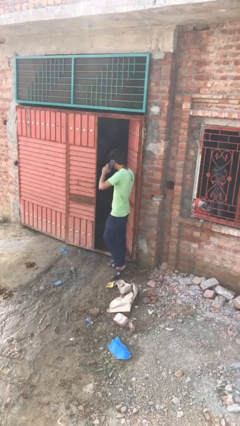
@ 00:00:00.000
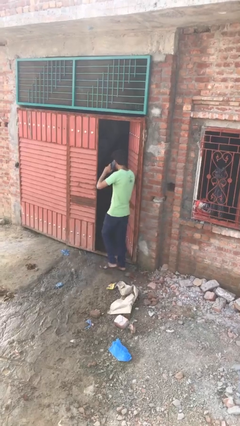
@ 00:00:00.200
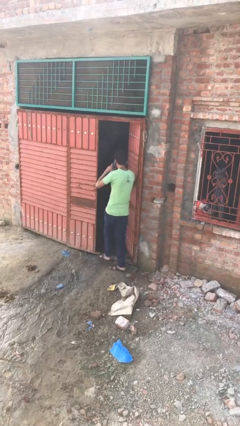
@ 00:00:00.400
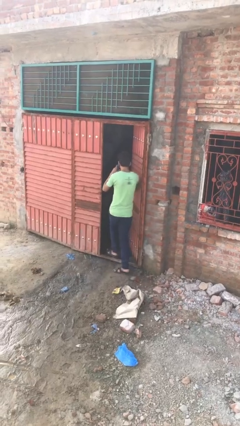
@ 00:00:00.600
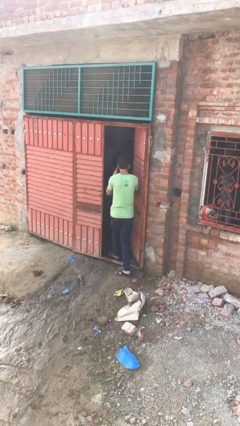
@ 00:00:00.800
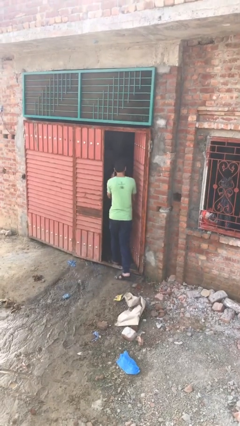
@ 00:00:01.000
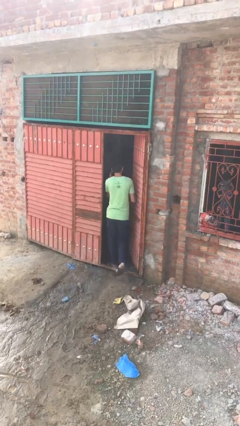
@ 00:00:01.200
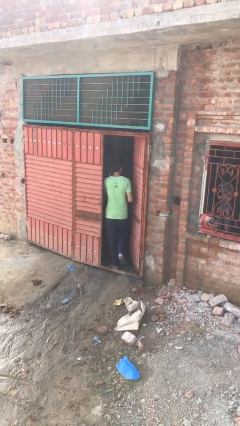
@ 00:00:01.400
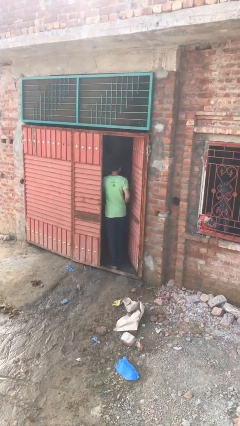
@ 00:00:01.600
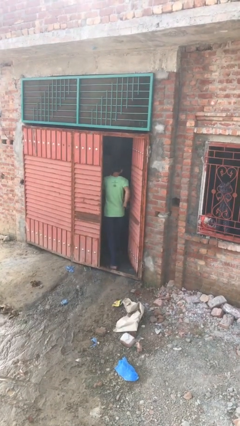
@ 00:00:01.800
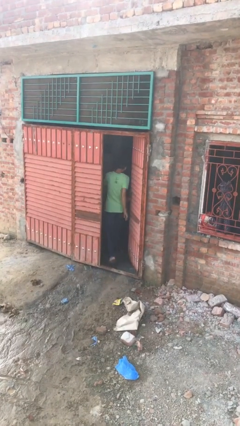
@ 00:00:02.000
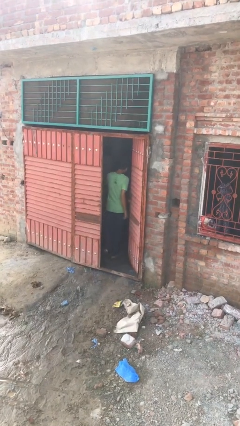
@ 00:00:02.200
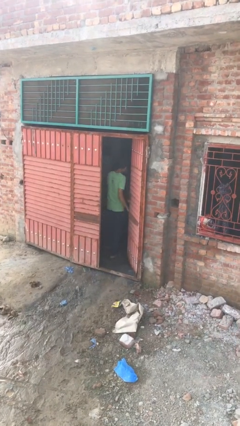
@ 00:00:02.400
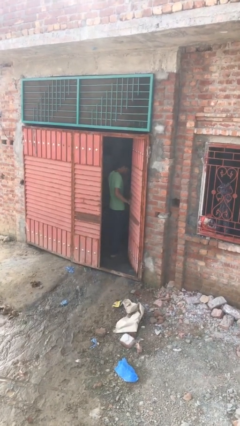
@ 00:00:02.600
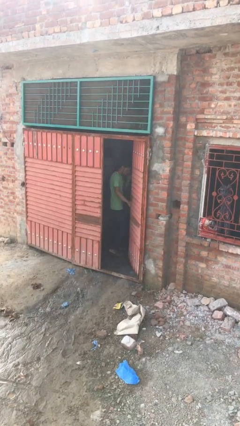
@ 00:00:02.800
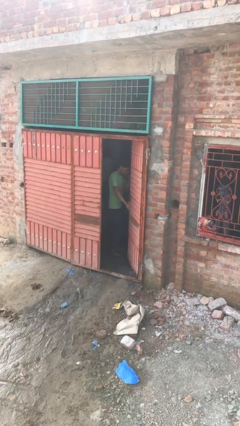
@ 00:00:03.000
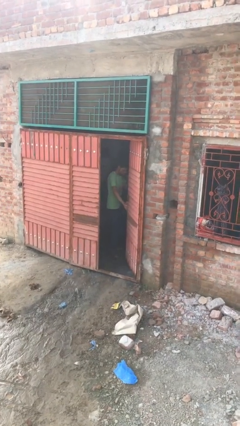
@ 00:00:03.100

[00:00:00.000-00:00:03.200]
person exits scene through structure

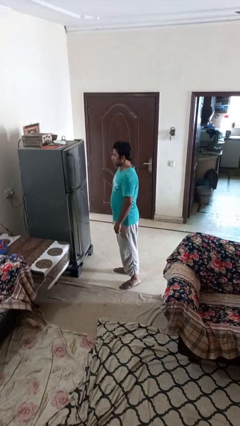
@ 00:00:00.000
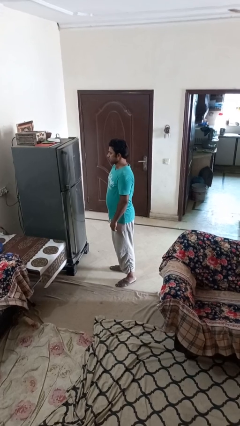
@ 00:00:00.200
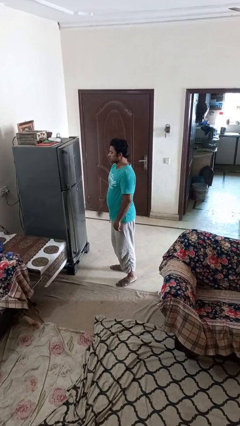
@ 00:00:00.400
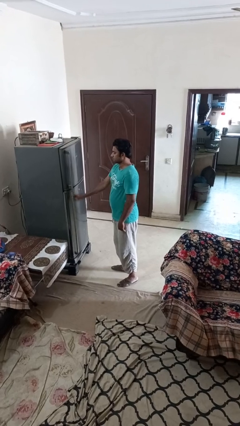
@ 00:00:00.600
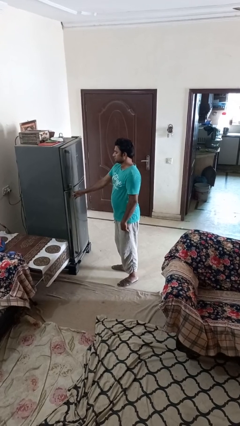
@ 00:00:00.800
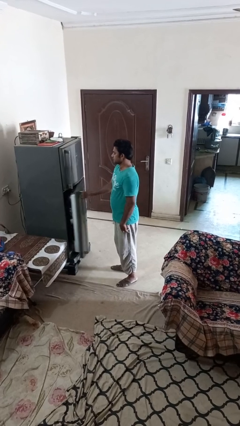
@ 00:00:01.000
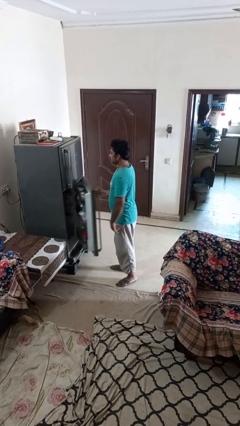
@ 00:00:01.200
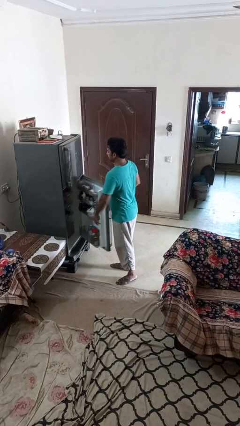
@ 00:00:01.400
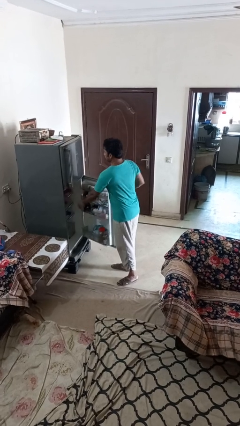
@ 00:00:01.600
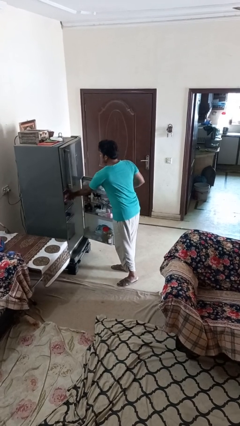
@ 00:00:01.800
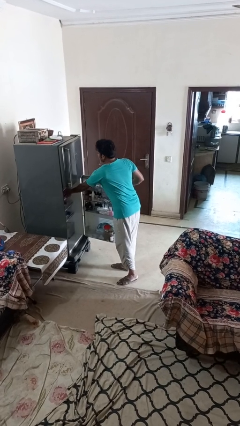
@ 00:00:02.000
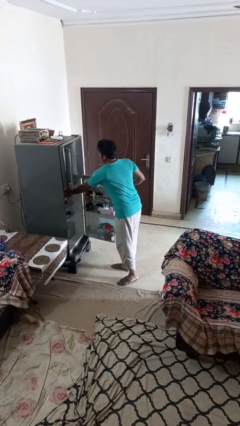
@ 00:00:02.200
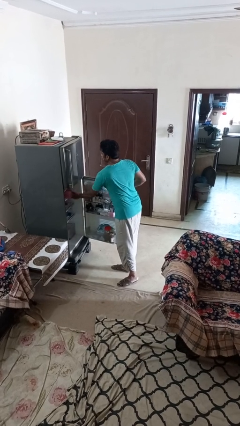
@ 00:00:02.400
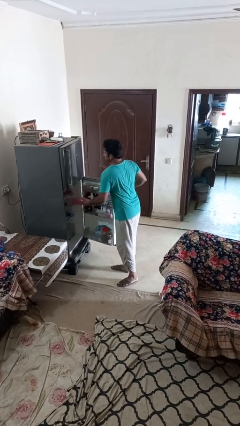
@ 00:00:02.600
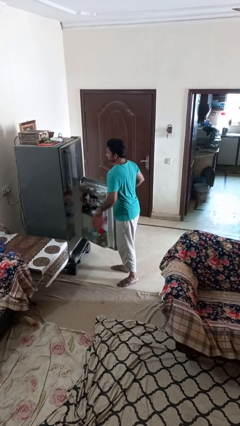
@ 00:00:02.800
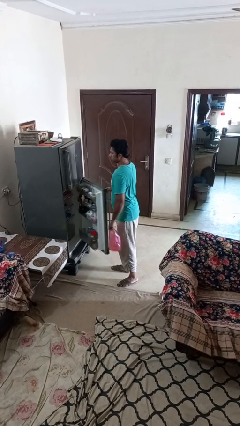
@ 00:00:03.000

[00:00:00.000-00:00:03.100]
person takes object from refrigerator

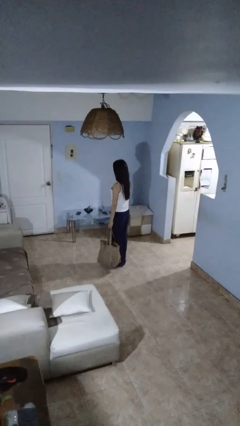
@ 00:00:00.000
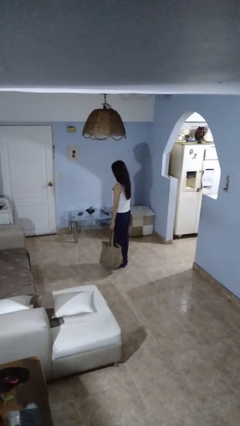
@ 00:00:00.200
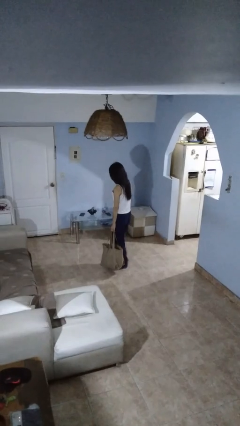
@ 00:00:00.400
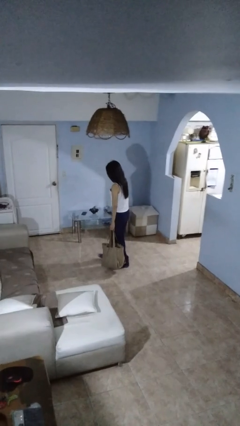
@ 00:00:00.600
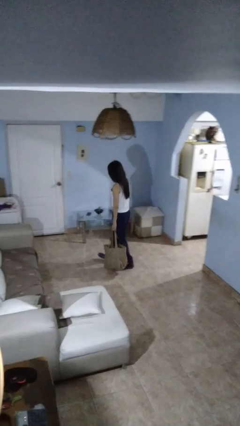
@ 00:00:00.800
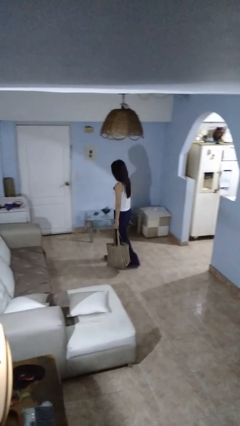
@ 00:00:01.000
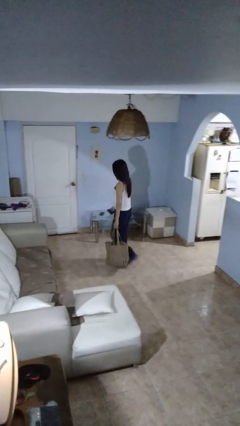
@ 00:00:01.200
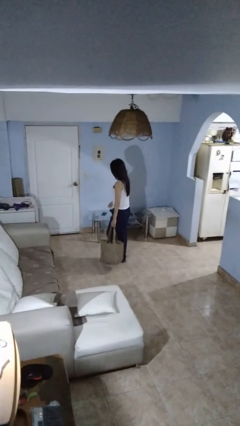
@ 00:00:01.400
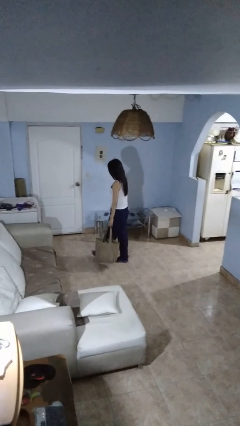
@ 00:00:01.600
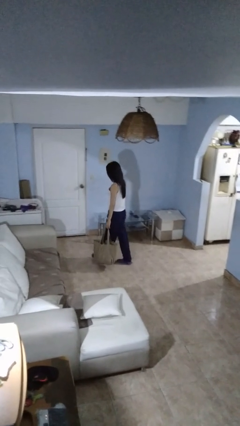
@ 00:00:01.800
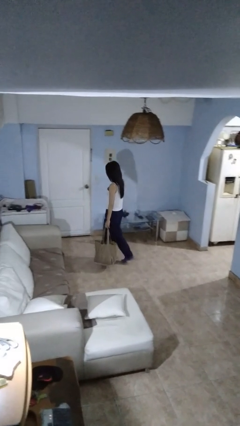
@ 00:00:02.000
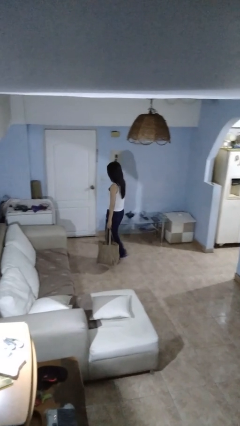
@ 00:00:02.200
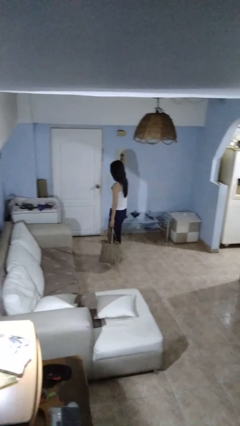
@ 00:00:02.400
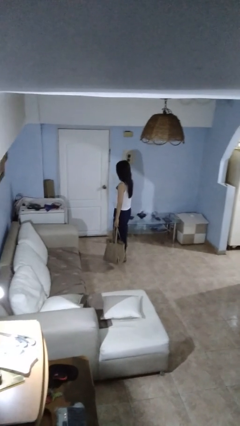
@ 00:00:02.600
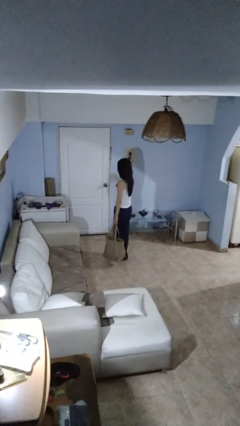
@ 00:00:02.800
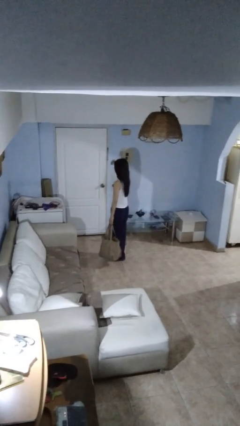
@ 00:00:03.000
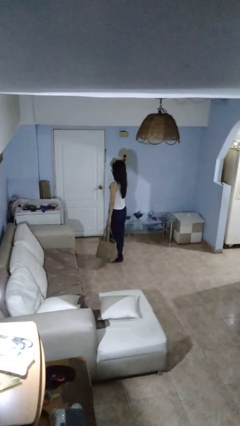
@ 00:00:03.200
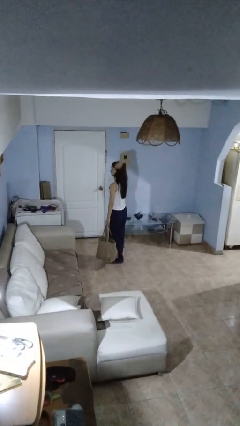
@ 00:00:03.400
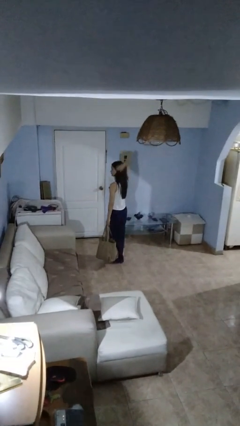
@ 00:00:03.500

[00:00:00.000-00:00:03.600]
person carries groceries

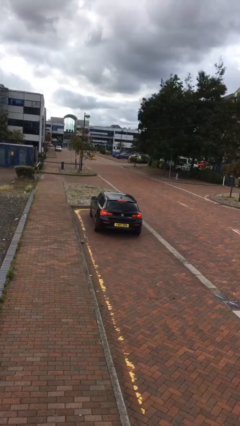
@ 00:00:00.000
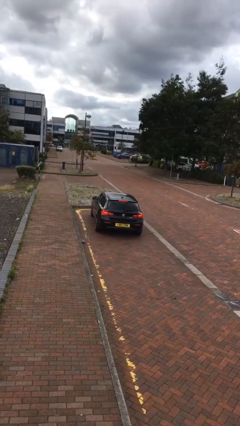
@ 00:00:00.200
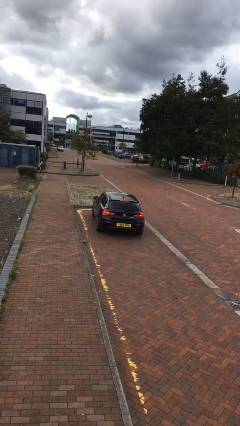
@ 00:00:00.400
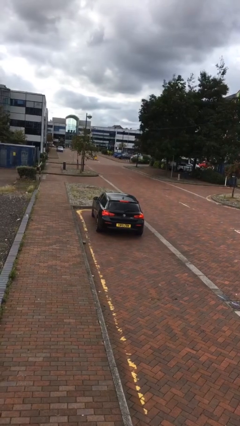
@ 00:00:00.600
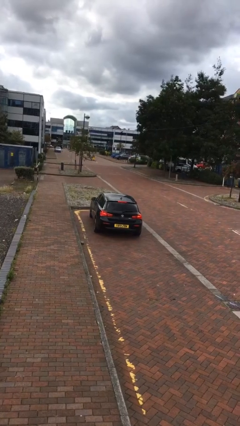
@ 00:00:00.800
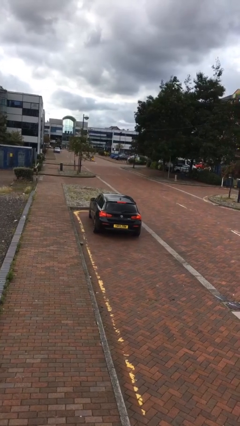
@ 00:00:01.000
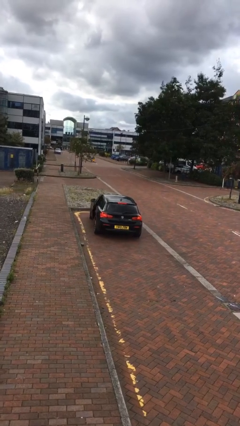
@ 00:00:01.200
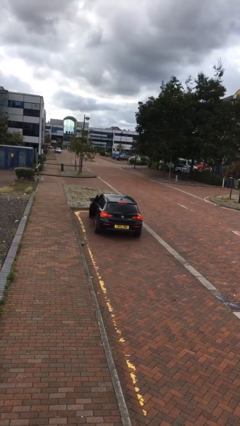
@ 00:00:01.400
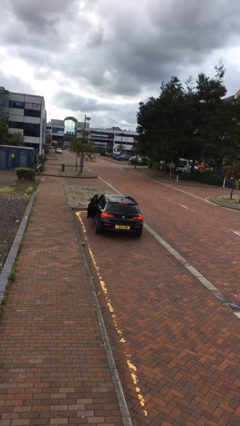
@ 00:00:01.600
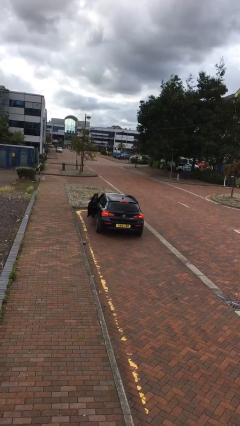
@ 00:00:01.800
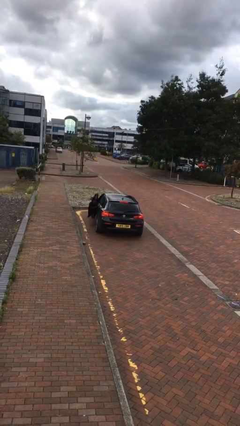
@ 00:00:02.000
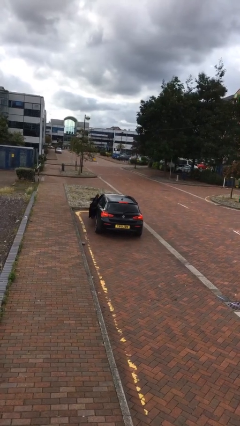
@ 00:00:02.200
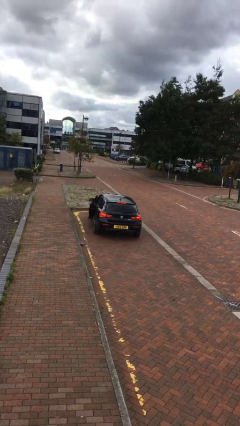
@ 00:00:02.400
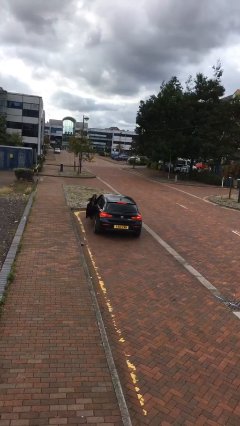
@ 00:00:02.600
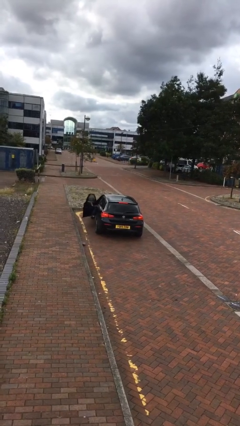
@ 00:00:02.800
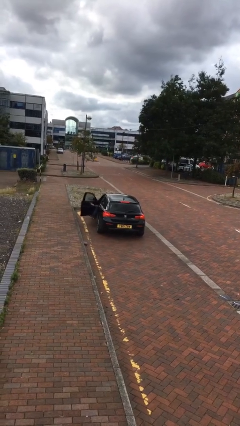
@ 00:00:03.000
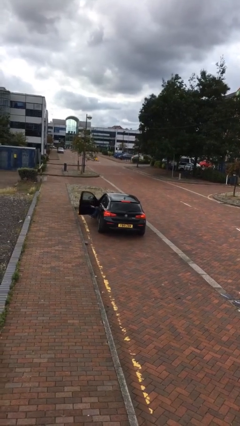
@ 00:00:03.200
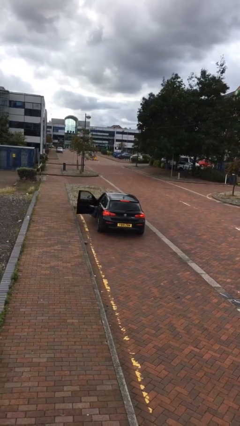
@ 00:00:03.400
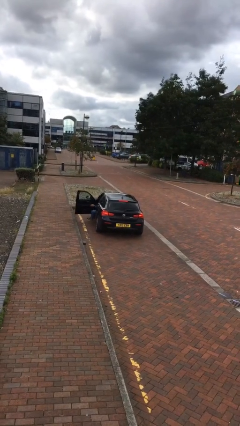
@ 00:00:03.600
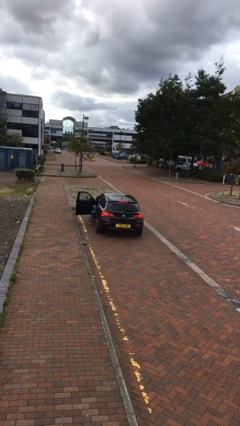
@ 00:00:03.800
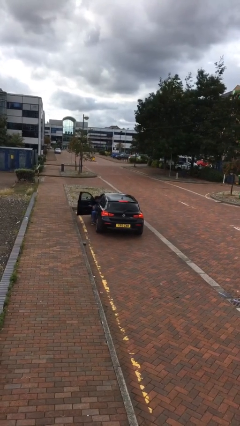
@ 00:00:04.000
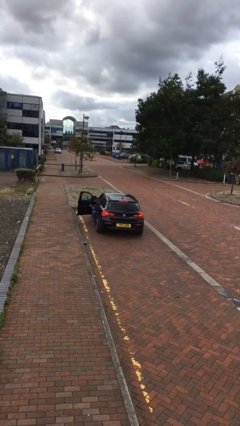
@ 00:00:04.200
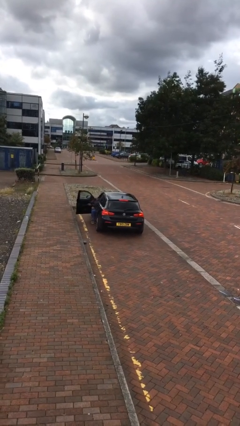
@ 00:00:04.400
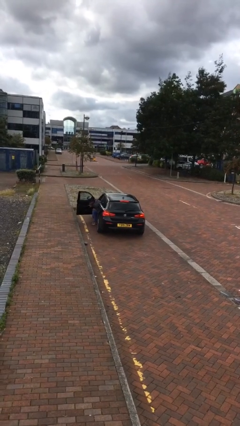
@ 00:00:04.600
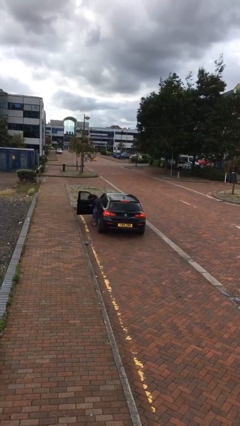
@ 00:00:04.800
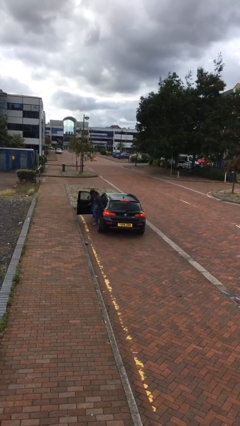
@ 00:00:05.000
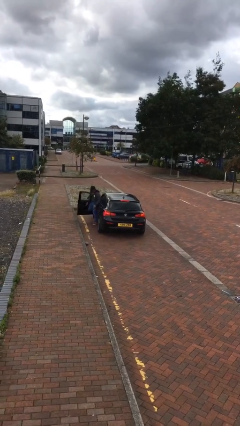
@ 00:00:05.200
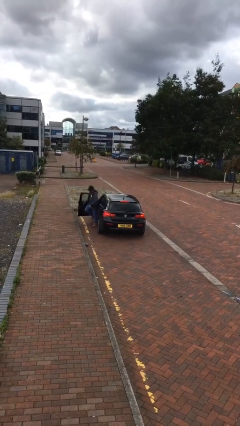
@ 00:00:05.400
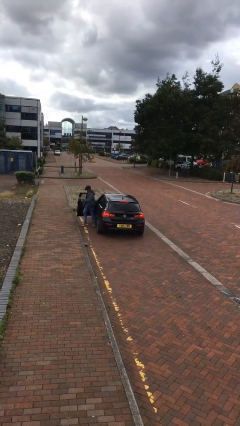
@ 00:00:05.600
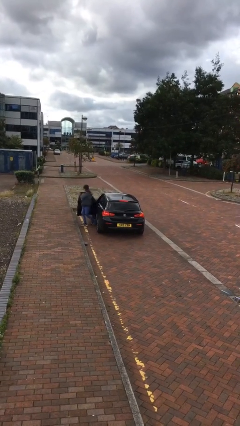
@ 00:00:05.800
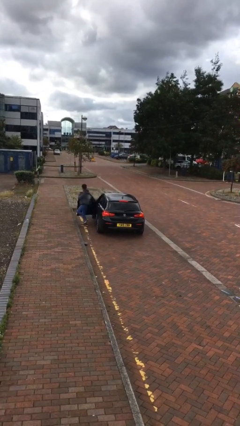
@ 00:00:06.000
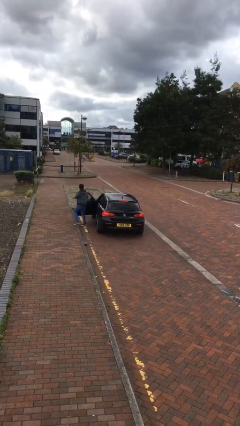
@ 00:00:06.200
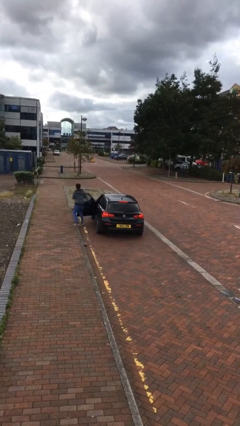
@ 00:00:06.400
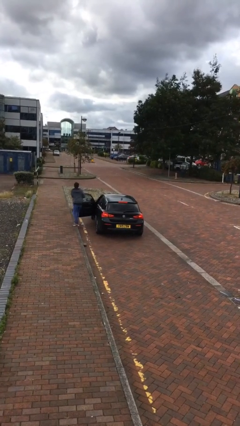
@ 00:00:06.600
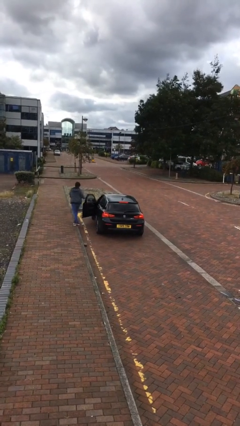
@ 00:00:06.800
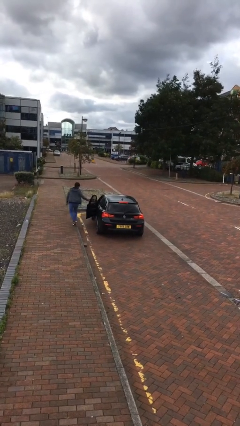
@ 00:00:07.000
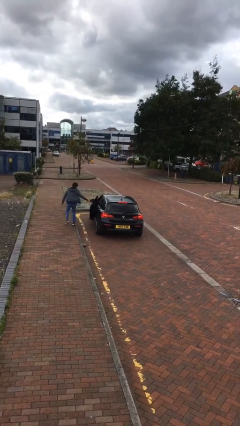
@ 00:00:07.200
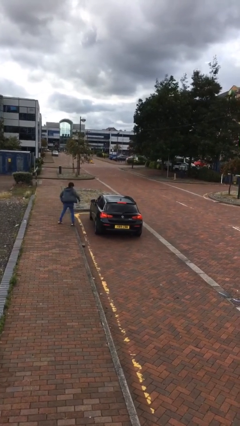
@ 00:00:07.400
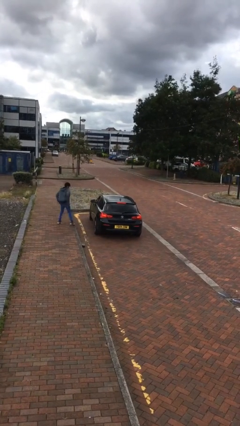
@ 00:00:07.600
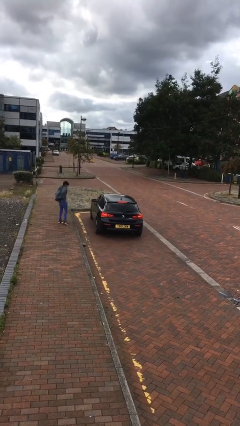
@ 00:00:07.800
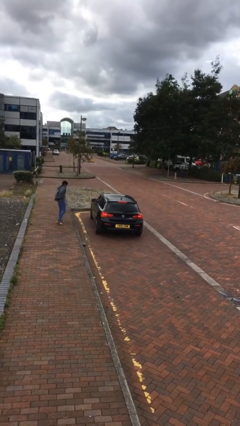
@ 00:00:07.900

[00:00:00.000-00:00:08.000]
car drops off person
